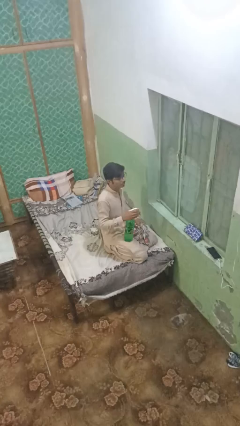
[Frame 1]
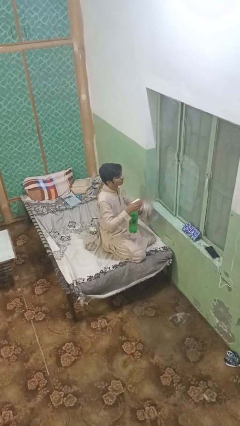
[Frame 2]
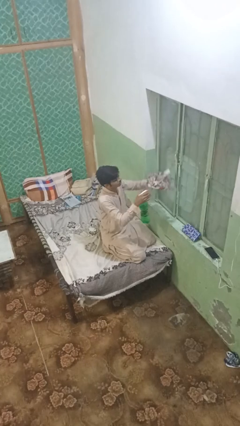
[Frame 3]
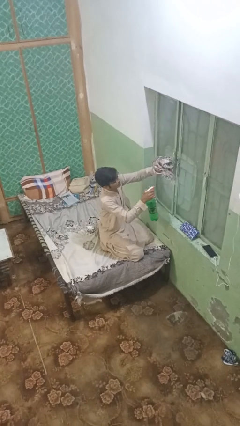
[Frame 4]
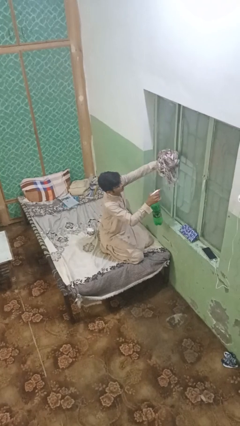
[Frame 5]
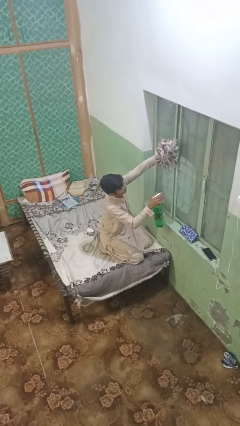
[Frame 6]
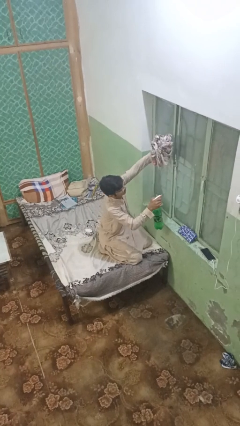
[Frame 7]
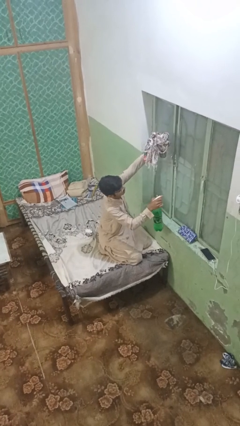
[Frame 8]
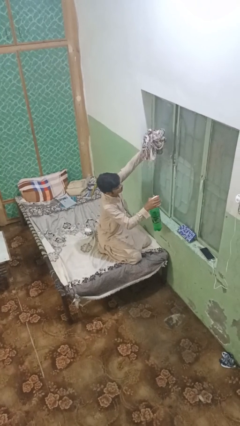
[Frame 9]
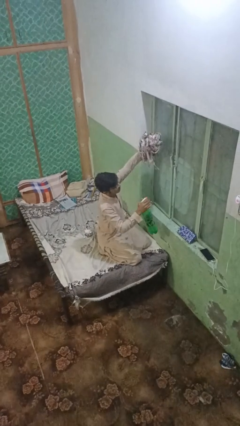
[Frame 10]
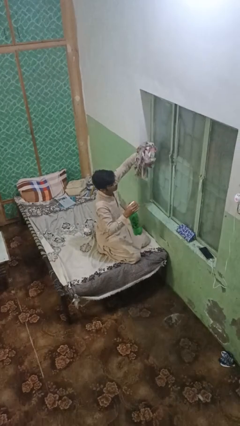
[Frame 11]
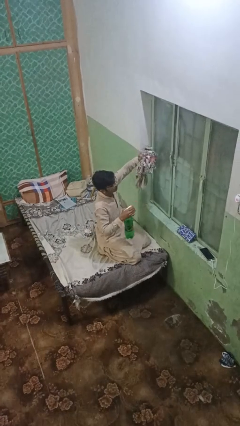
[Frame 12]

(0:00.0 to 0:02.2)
person sprays from bottle

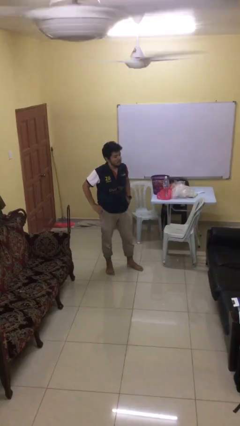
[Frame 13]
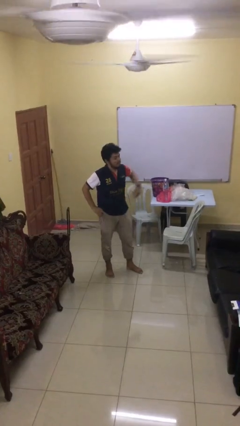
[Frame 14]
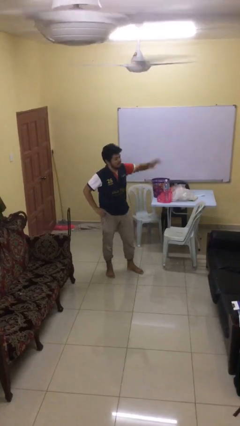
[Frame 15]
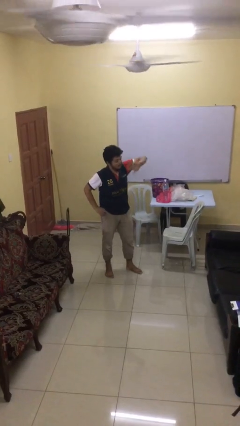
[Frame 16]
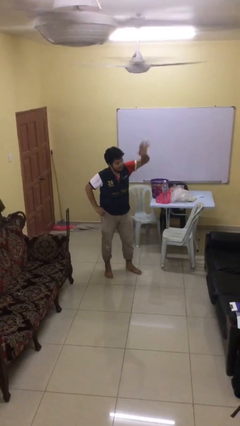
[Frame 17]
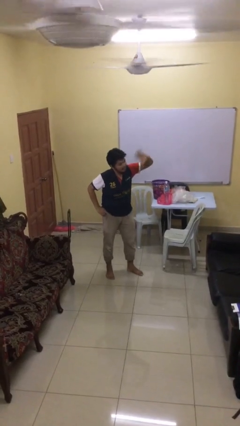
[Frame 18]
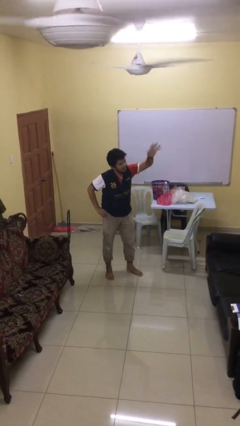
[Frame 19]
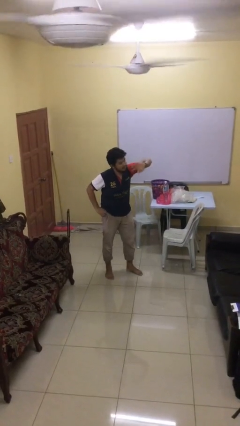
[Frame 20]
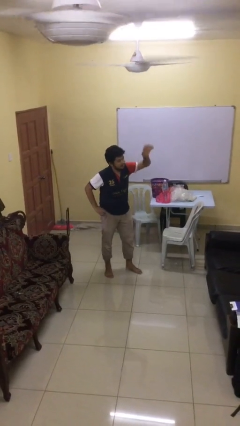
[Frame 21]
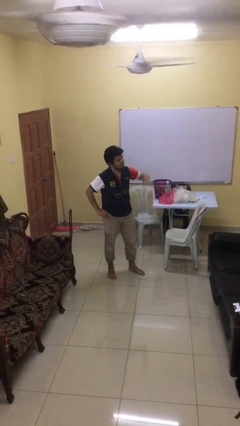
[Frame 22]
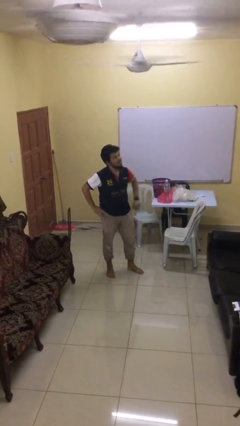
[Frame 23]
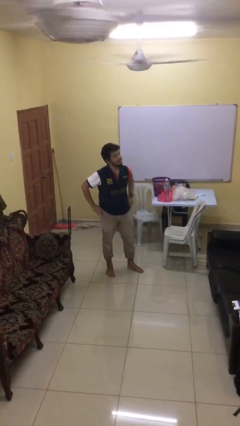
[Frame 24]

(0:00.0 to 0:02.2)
person waves at person

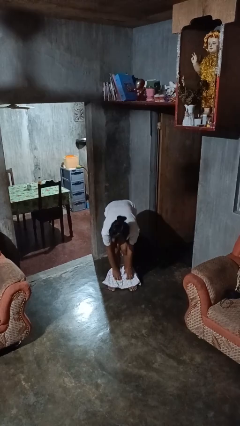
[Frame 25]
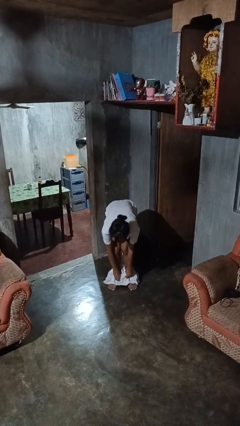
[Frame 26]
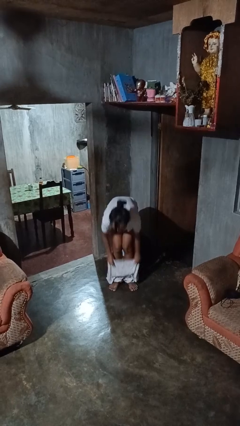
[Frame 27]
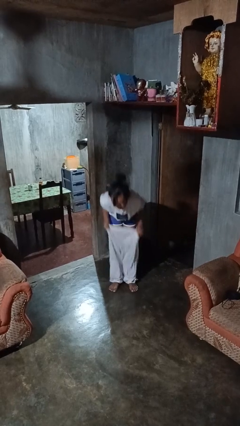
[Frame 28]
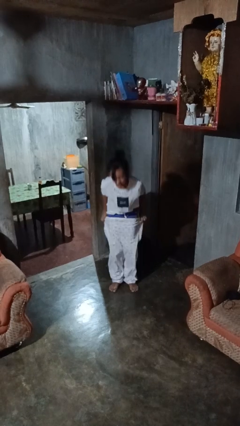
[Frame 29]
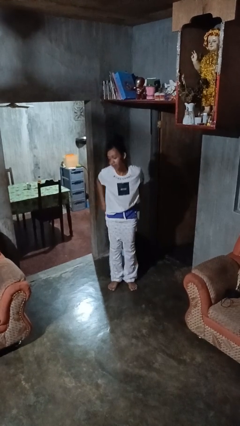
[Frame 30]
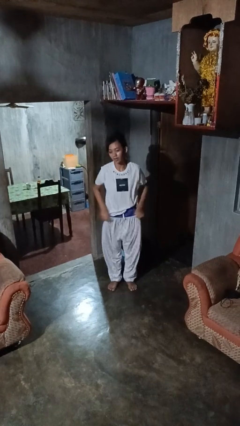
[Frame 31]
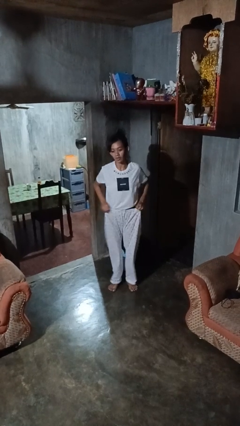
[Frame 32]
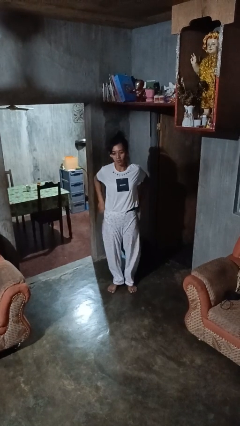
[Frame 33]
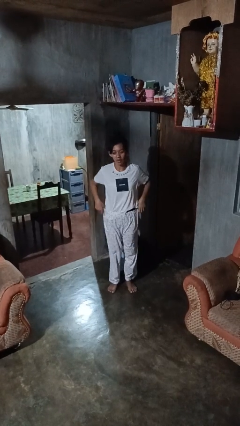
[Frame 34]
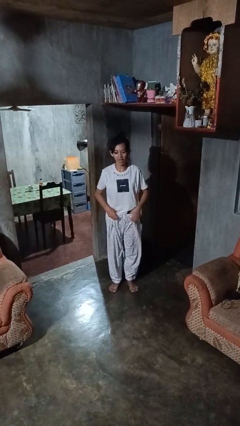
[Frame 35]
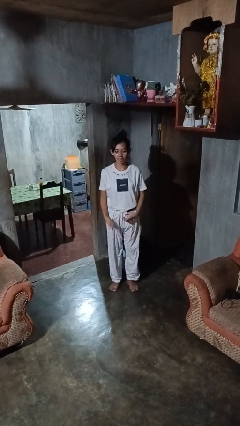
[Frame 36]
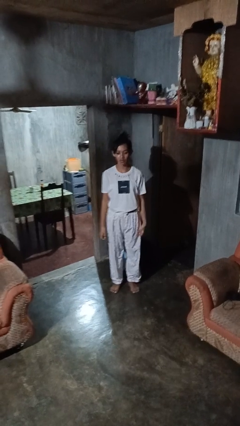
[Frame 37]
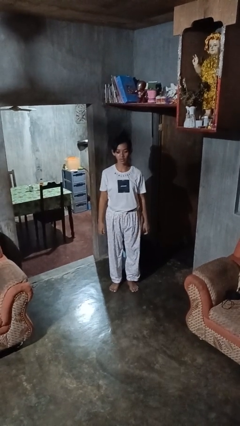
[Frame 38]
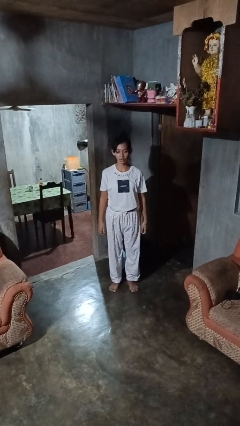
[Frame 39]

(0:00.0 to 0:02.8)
person puts on pants

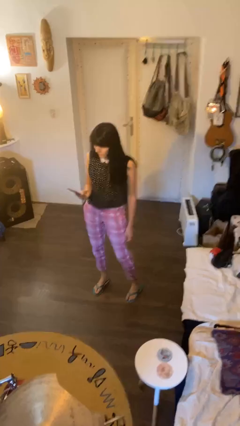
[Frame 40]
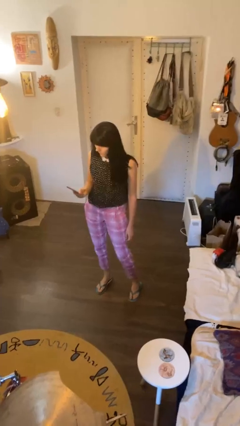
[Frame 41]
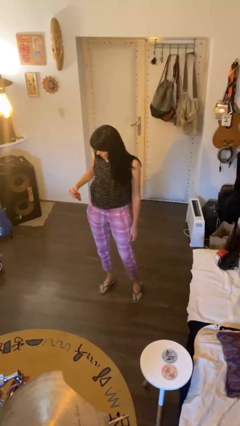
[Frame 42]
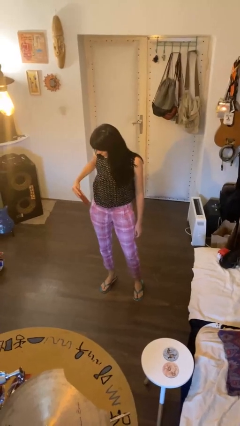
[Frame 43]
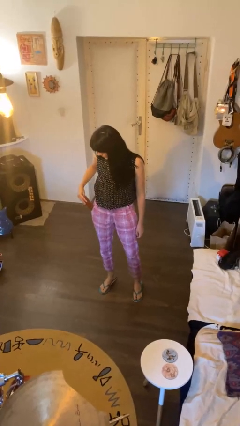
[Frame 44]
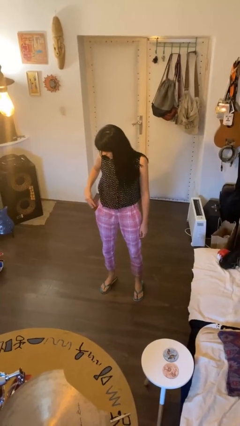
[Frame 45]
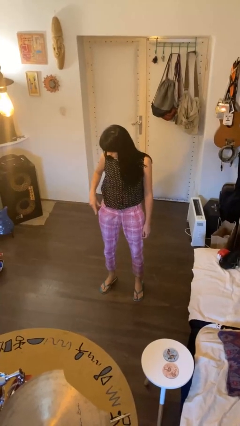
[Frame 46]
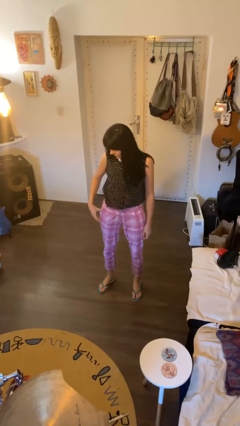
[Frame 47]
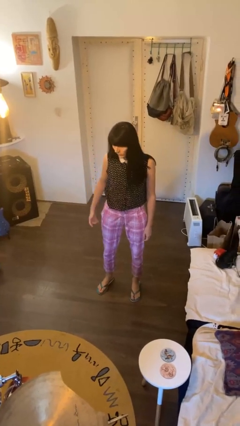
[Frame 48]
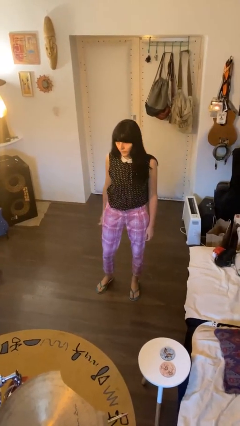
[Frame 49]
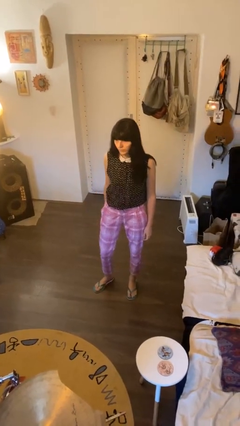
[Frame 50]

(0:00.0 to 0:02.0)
person puts phone into pocket

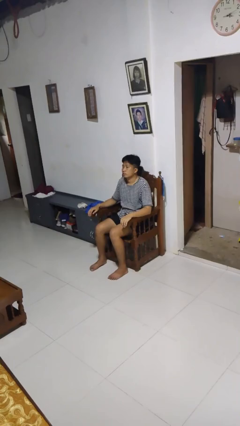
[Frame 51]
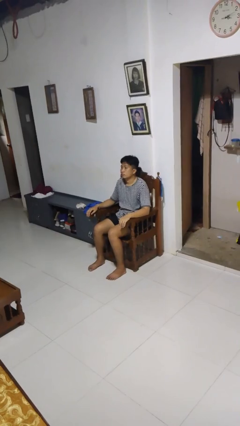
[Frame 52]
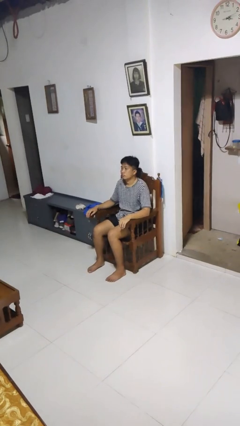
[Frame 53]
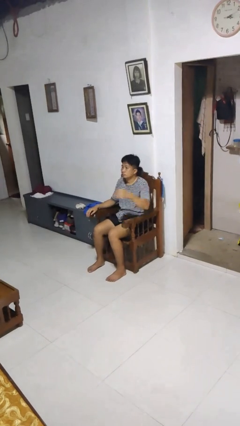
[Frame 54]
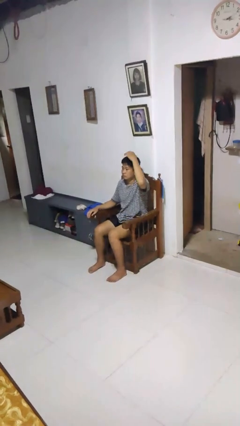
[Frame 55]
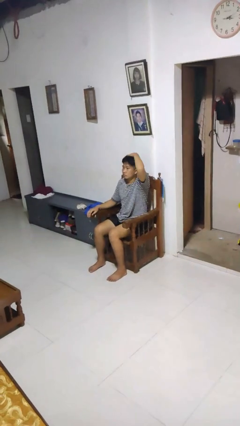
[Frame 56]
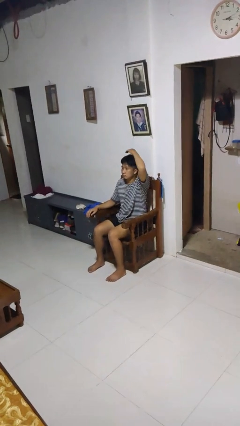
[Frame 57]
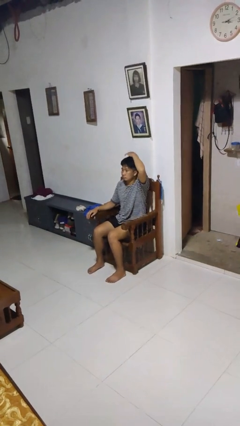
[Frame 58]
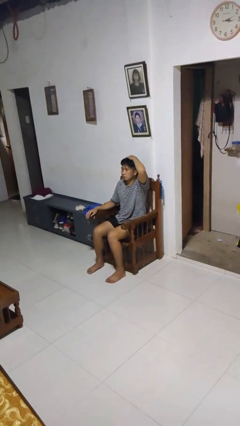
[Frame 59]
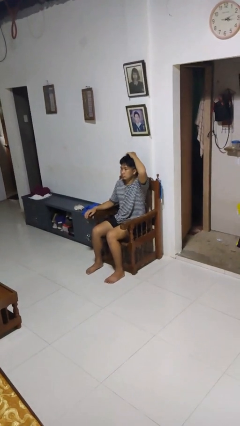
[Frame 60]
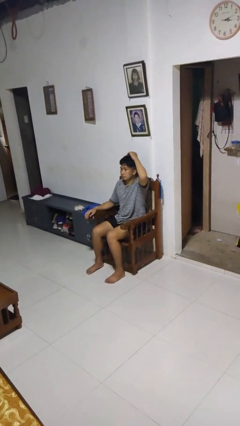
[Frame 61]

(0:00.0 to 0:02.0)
person pats head

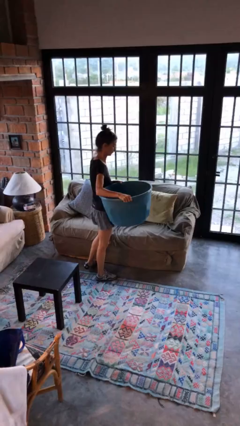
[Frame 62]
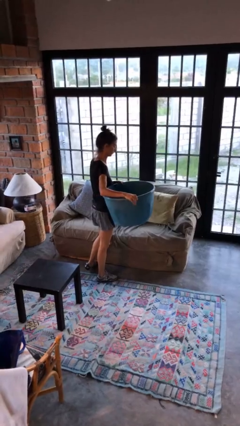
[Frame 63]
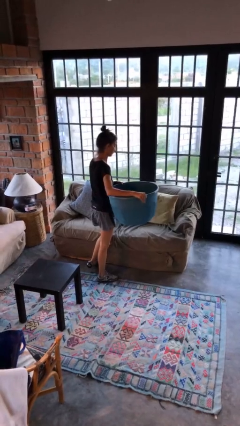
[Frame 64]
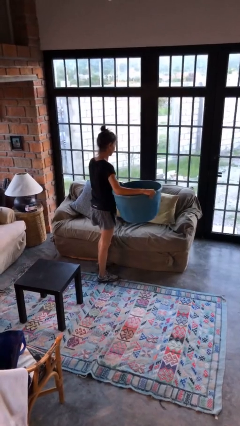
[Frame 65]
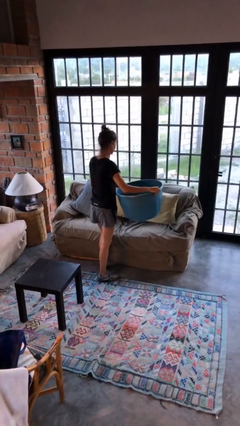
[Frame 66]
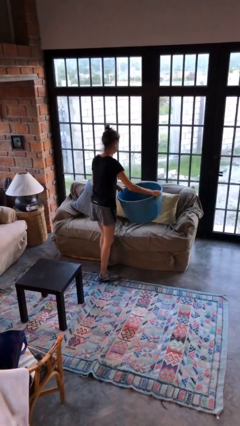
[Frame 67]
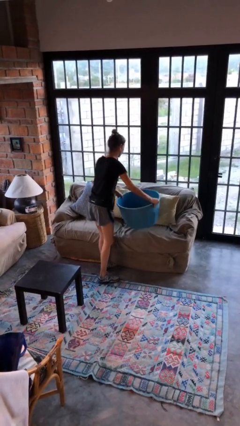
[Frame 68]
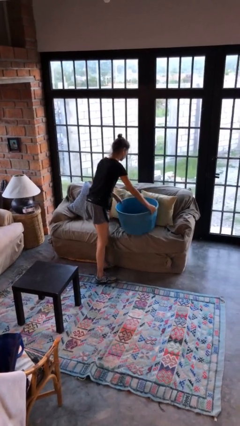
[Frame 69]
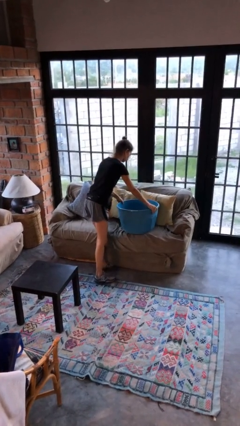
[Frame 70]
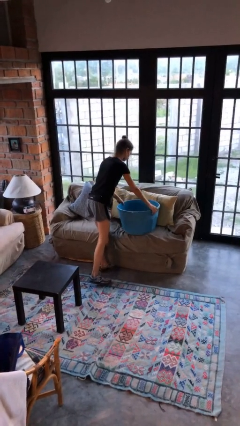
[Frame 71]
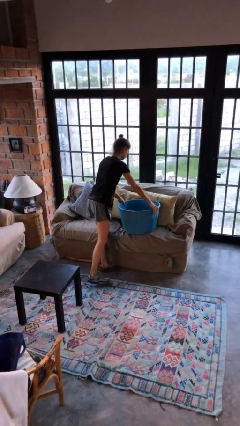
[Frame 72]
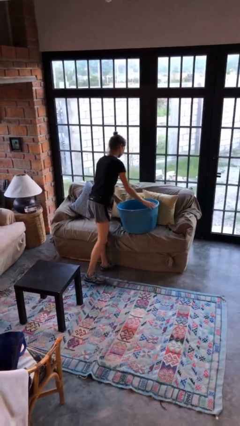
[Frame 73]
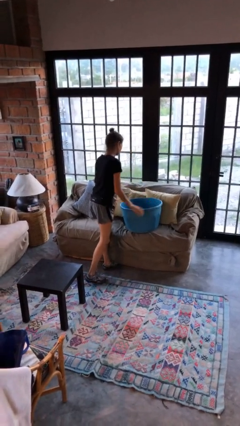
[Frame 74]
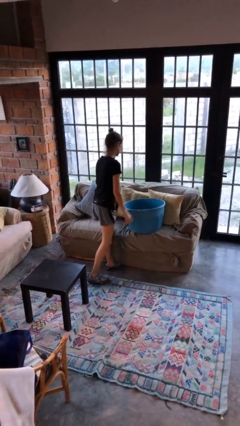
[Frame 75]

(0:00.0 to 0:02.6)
person puts down object on couch

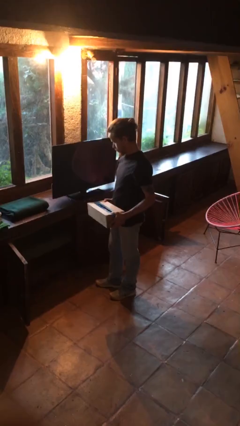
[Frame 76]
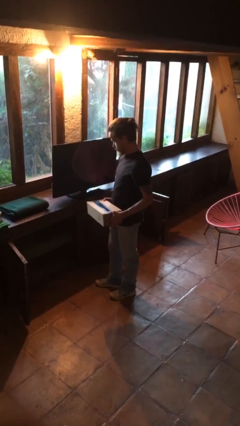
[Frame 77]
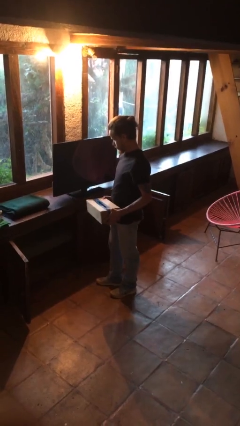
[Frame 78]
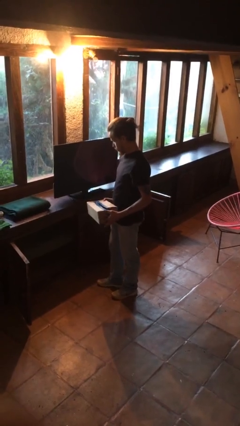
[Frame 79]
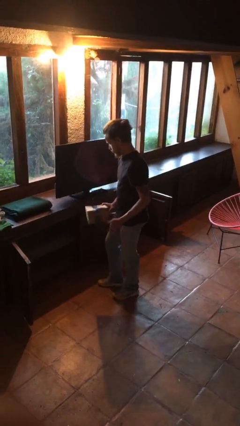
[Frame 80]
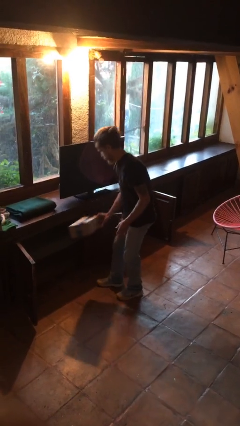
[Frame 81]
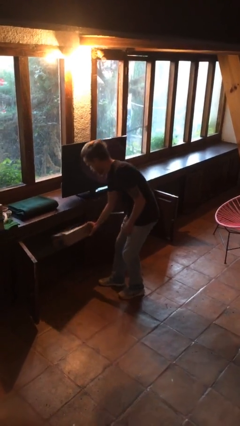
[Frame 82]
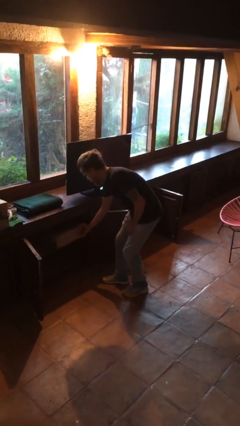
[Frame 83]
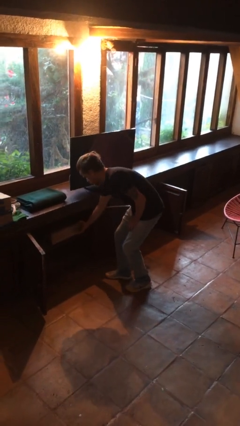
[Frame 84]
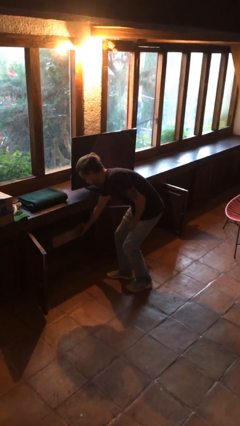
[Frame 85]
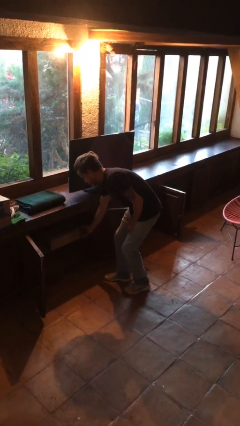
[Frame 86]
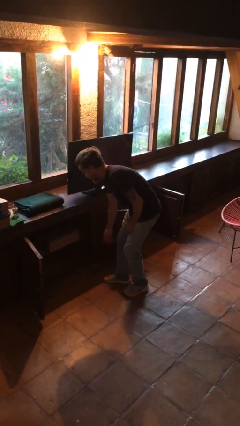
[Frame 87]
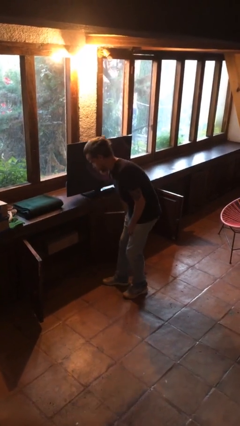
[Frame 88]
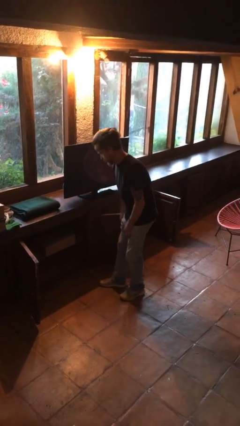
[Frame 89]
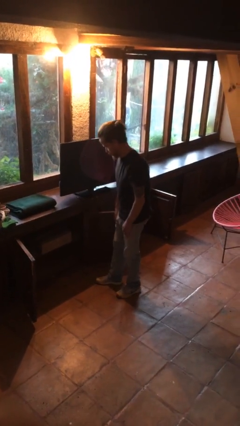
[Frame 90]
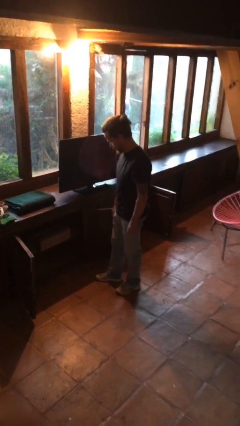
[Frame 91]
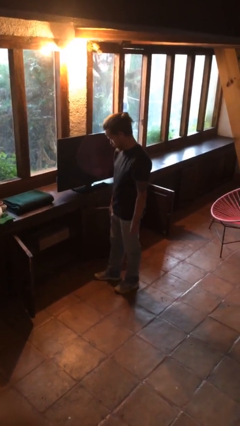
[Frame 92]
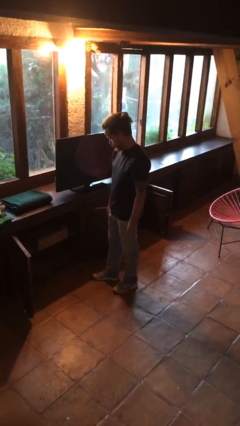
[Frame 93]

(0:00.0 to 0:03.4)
person puts down object into cabinet

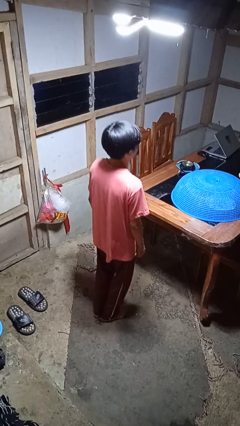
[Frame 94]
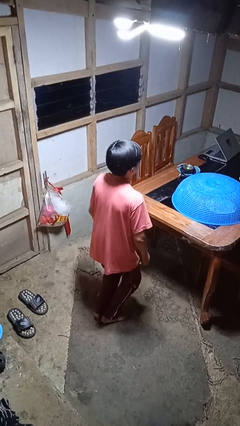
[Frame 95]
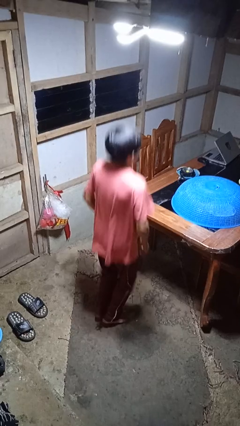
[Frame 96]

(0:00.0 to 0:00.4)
person jumps
